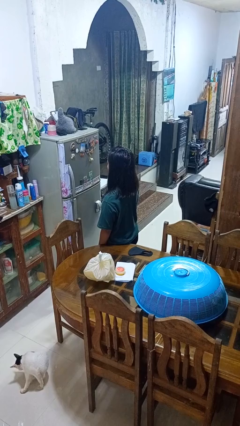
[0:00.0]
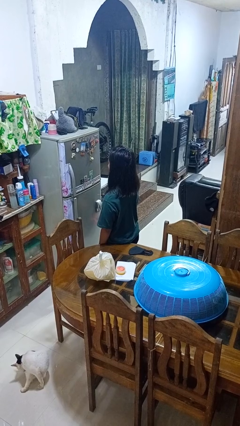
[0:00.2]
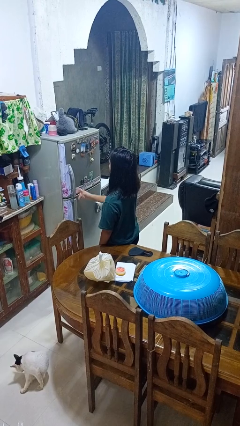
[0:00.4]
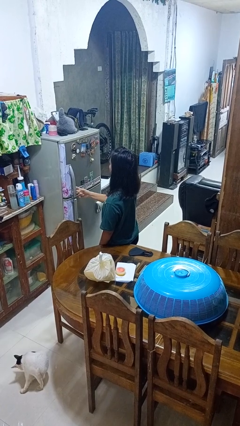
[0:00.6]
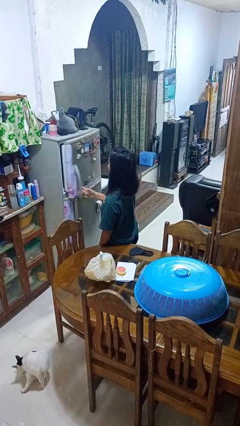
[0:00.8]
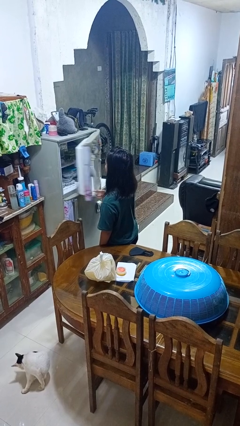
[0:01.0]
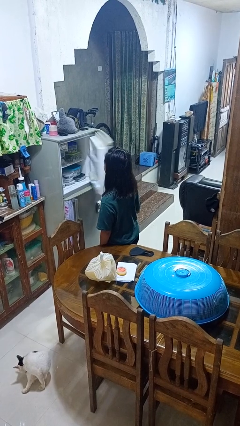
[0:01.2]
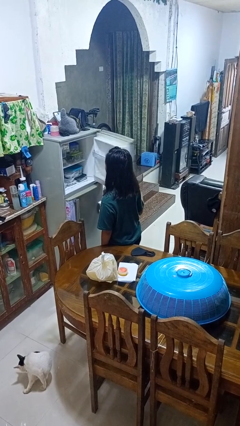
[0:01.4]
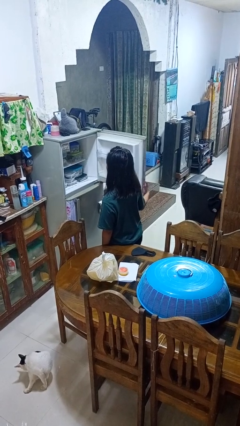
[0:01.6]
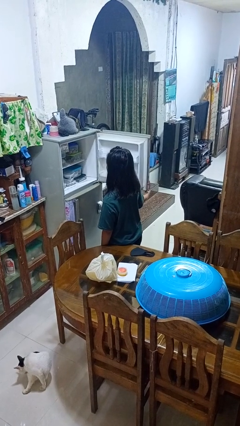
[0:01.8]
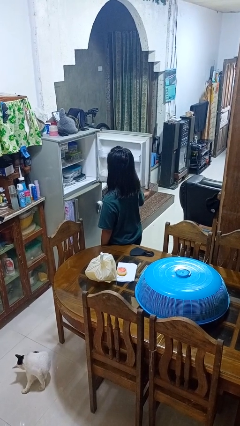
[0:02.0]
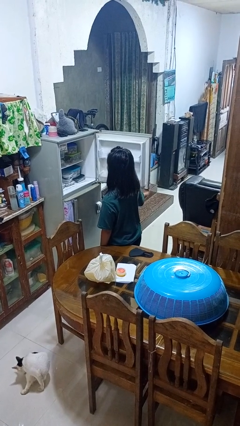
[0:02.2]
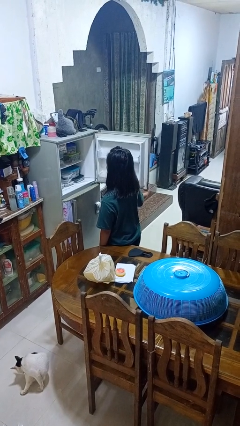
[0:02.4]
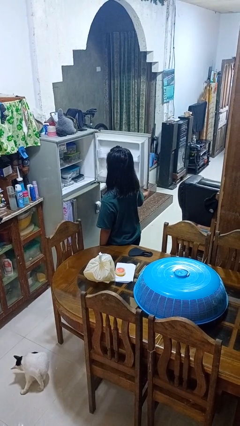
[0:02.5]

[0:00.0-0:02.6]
person opens refrigerator

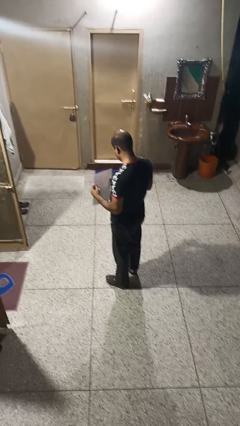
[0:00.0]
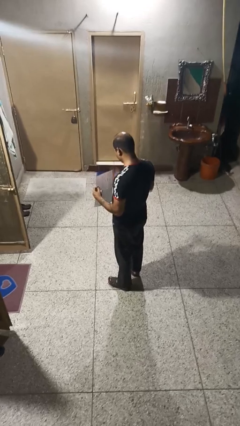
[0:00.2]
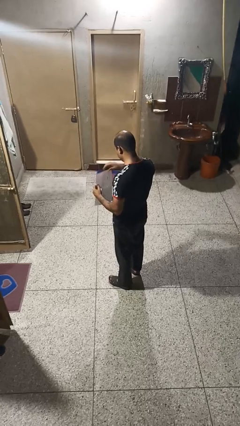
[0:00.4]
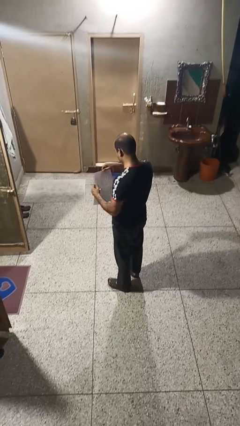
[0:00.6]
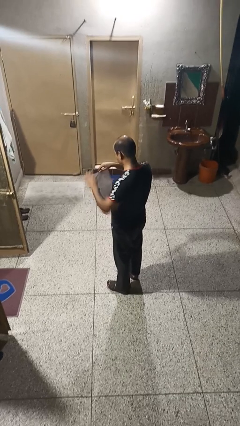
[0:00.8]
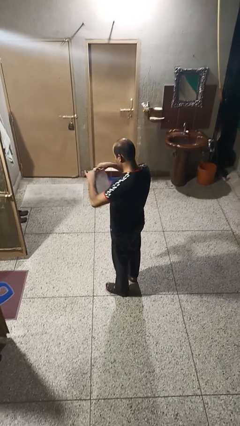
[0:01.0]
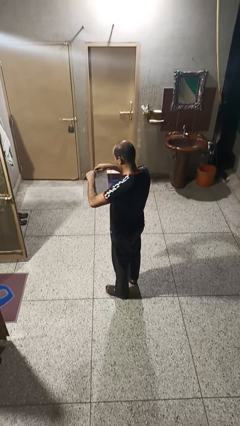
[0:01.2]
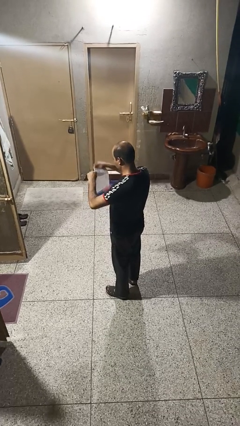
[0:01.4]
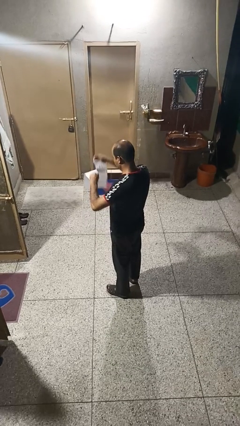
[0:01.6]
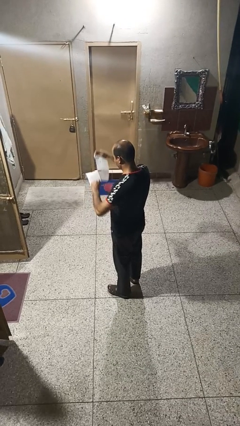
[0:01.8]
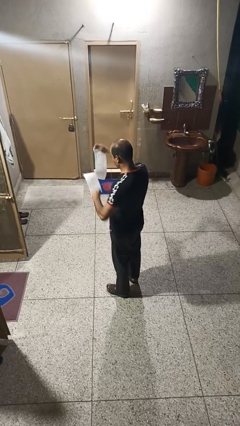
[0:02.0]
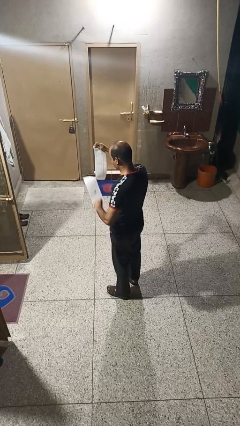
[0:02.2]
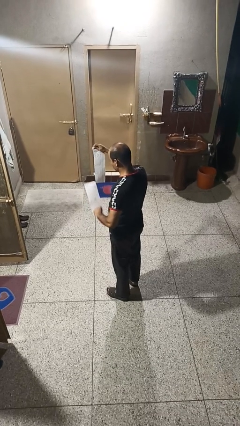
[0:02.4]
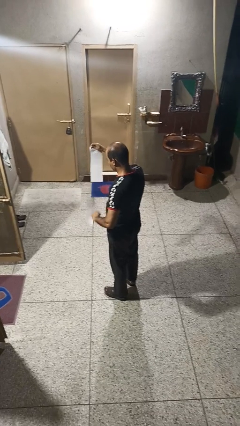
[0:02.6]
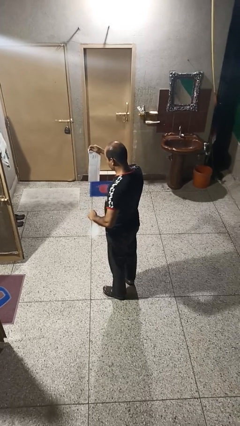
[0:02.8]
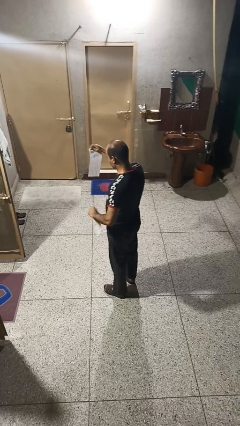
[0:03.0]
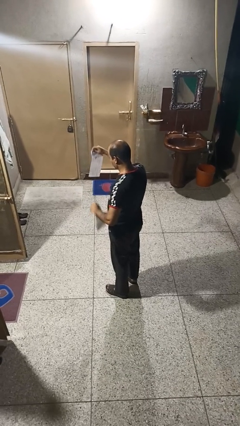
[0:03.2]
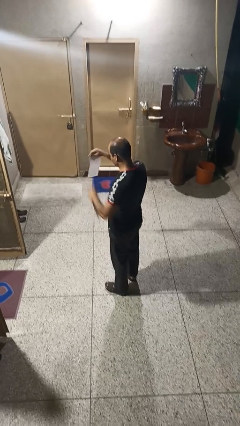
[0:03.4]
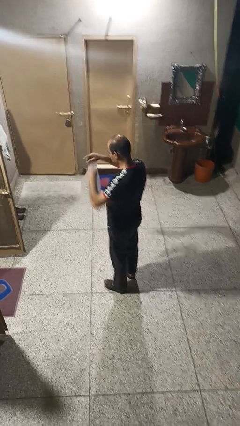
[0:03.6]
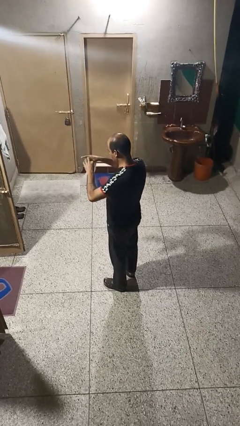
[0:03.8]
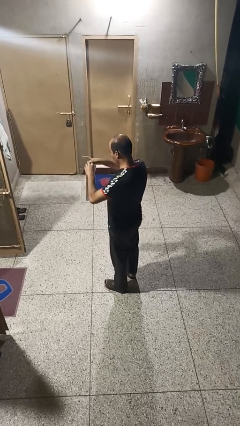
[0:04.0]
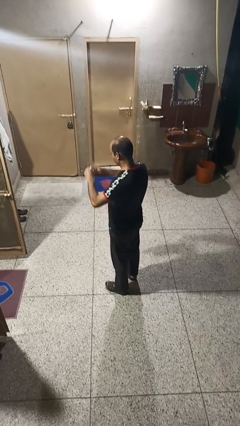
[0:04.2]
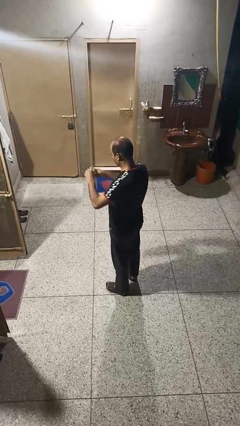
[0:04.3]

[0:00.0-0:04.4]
person tears paper

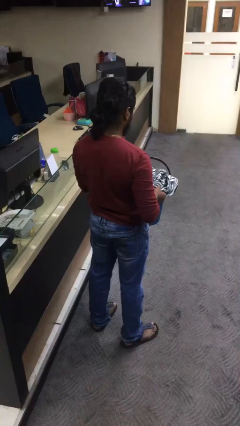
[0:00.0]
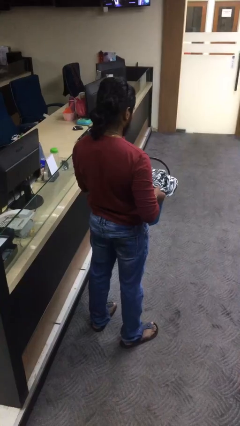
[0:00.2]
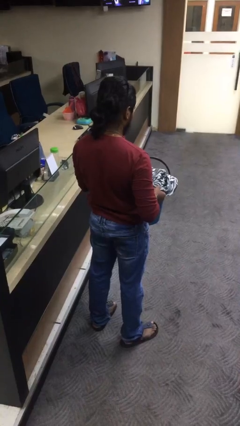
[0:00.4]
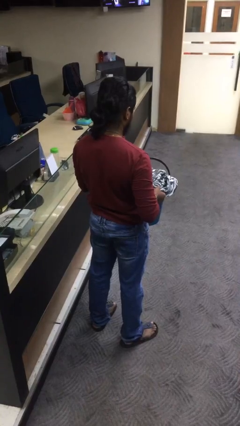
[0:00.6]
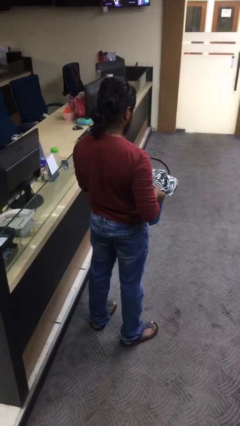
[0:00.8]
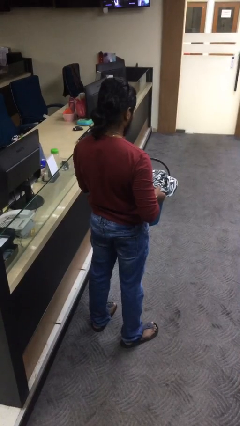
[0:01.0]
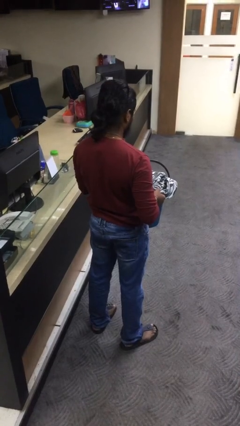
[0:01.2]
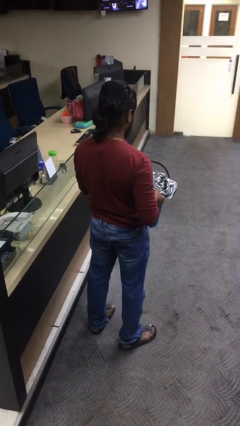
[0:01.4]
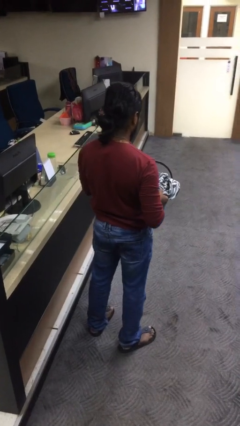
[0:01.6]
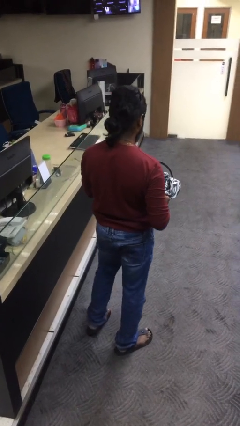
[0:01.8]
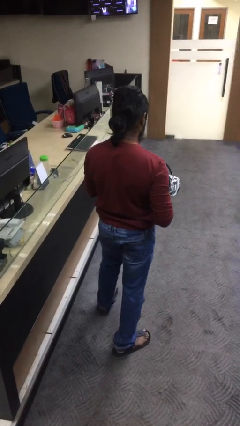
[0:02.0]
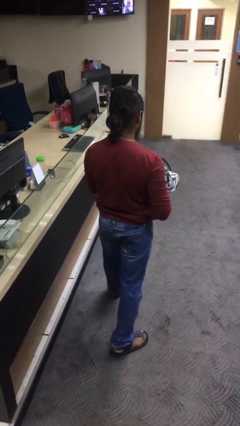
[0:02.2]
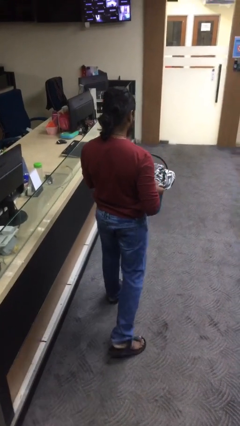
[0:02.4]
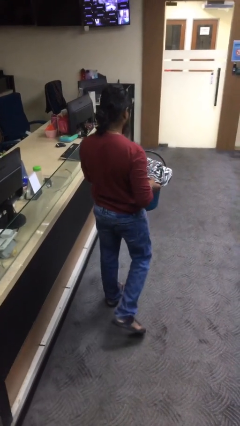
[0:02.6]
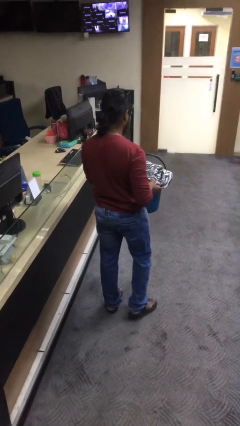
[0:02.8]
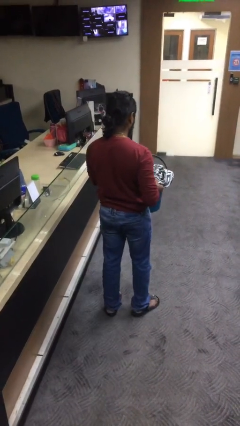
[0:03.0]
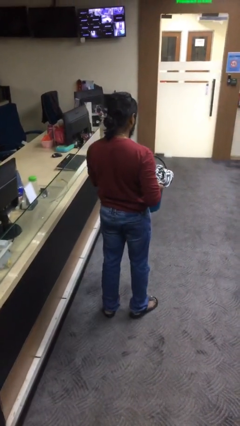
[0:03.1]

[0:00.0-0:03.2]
person carries laundry basket

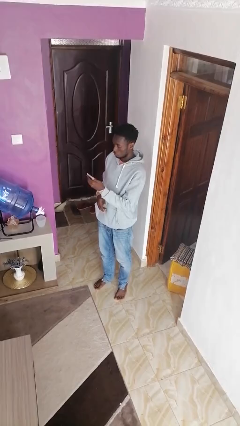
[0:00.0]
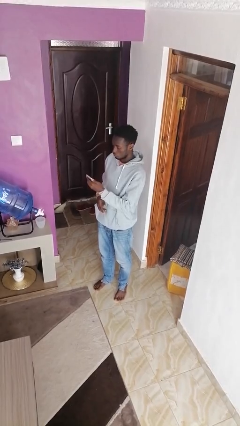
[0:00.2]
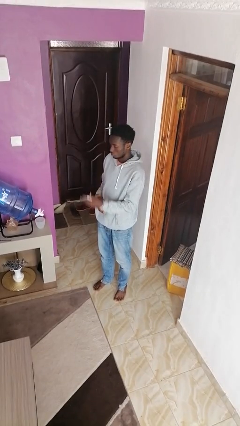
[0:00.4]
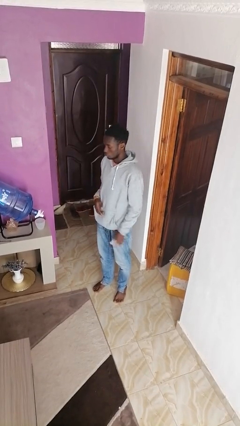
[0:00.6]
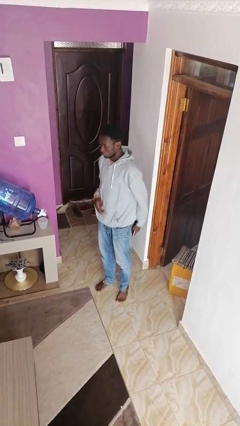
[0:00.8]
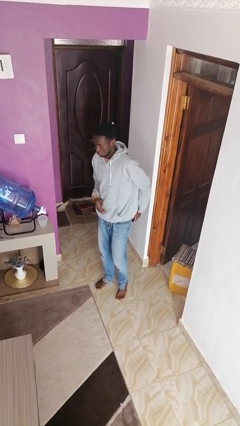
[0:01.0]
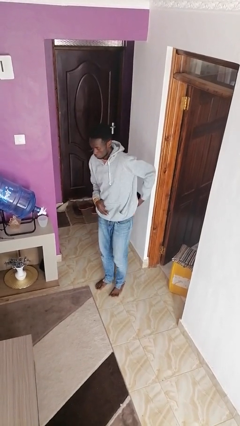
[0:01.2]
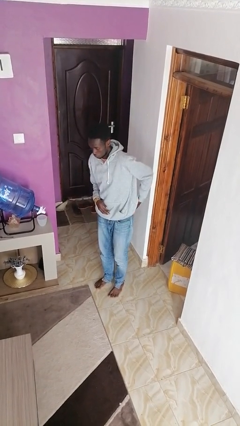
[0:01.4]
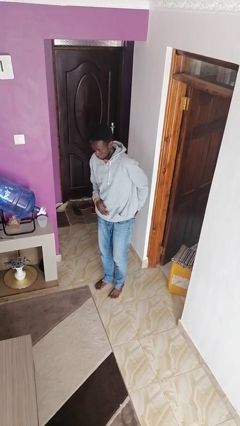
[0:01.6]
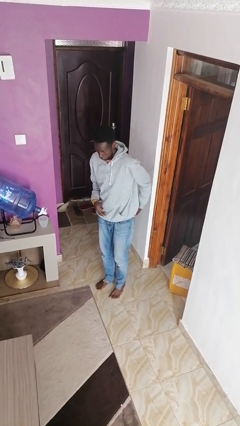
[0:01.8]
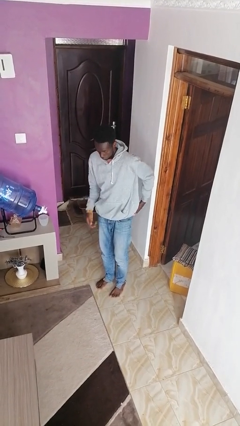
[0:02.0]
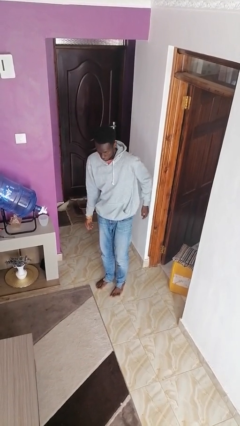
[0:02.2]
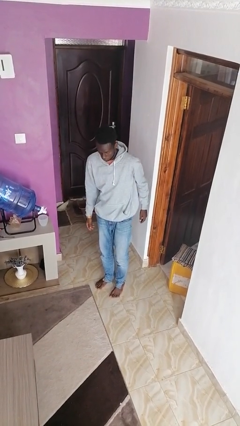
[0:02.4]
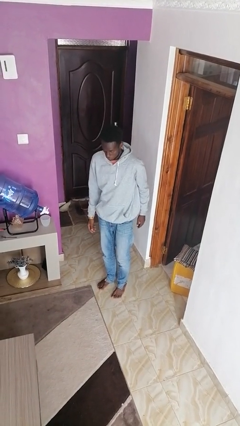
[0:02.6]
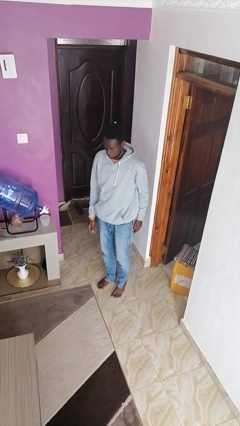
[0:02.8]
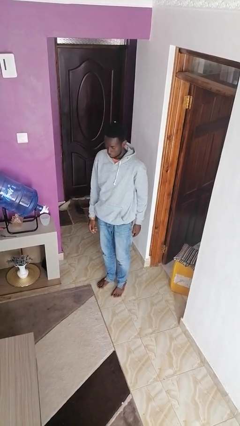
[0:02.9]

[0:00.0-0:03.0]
person puts phone into pocket

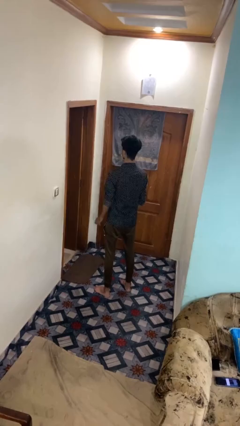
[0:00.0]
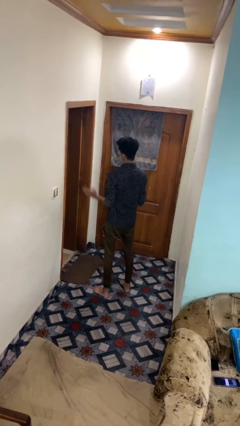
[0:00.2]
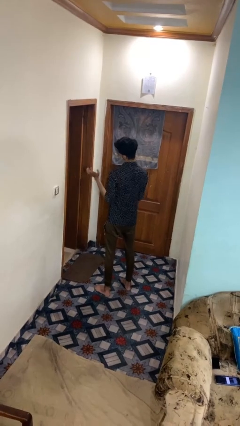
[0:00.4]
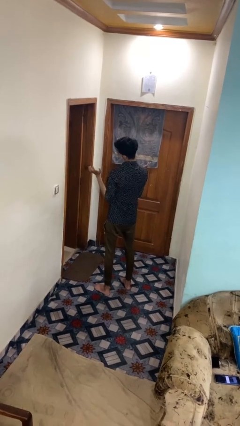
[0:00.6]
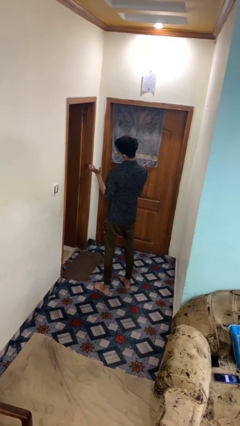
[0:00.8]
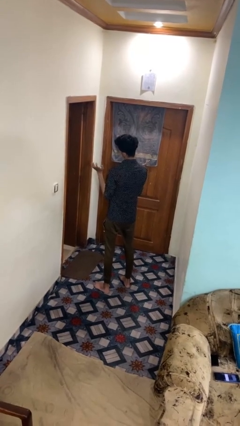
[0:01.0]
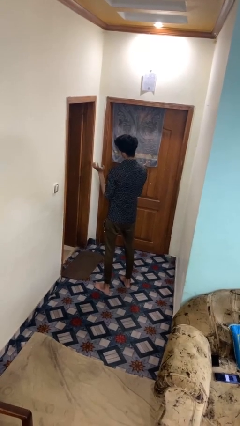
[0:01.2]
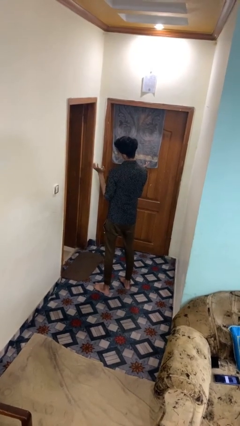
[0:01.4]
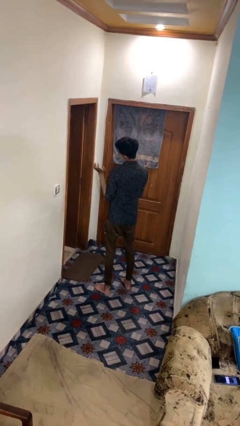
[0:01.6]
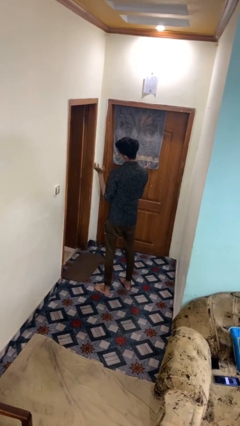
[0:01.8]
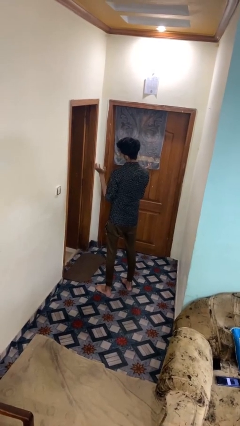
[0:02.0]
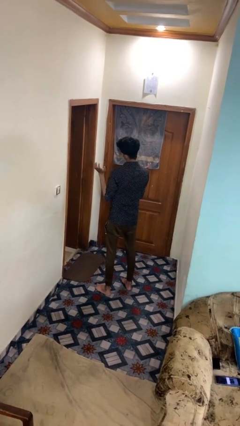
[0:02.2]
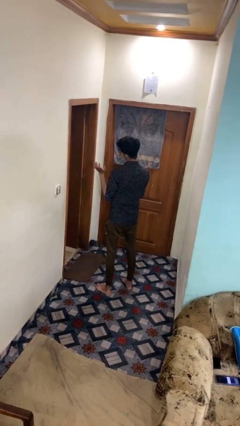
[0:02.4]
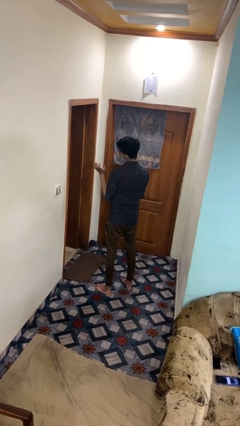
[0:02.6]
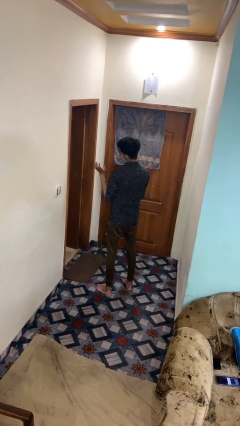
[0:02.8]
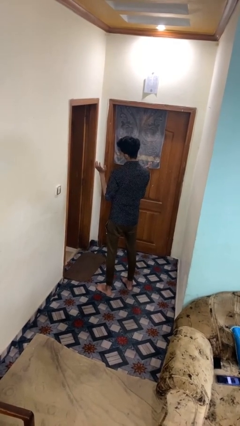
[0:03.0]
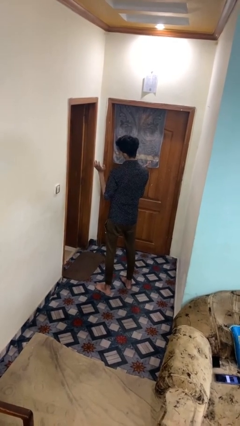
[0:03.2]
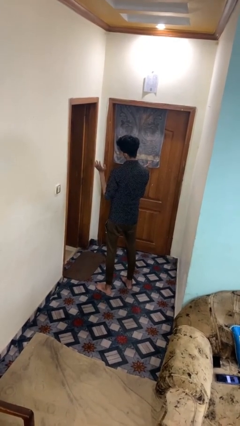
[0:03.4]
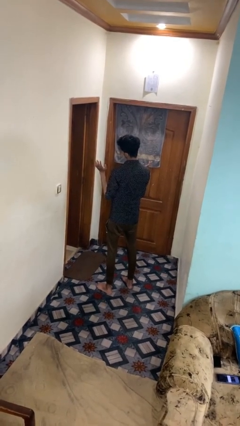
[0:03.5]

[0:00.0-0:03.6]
person shrugs

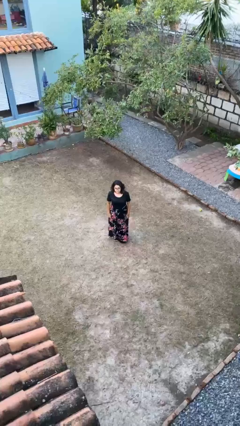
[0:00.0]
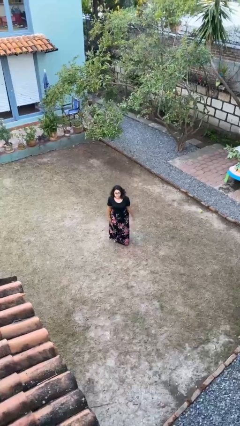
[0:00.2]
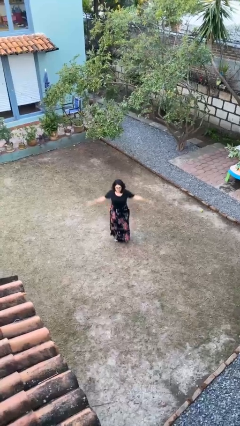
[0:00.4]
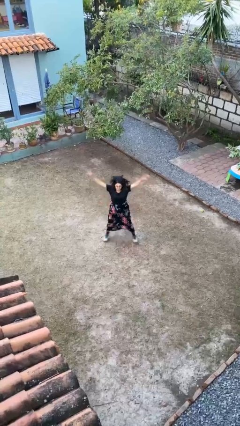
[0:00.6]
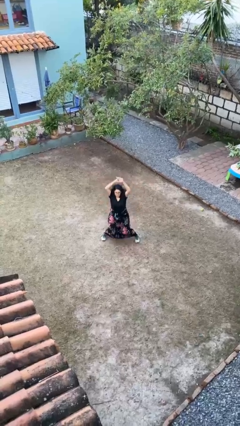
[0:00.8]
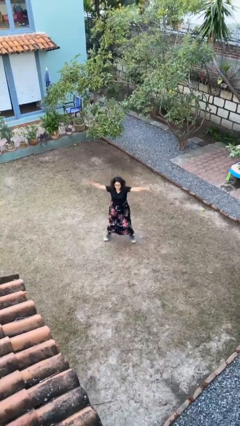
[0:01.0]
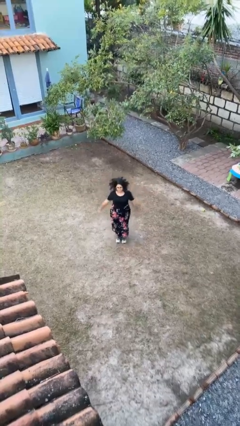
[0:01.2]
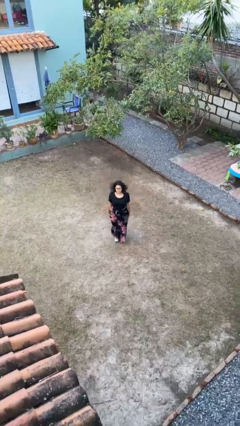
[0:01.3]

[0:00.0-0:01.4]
person exercises with jumping jacks
